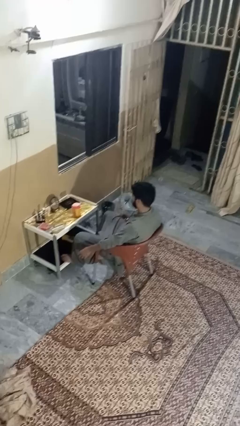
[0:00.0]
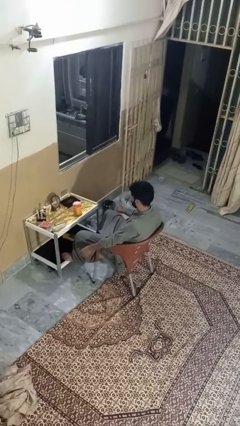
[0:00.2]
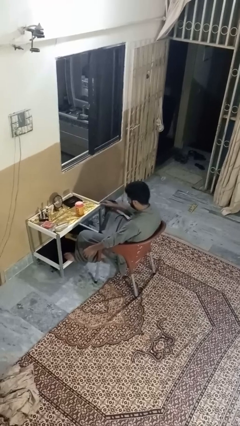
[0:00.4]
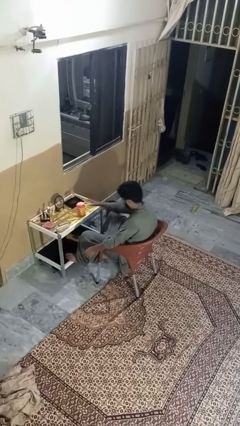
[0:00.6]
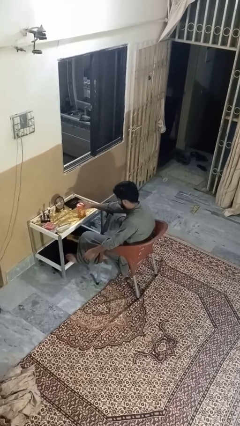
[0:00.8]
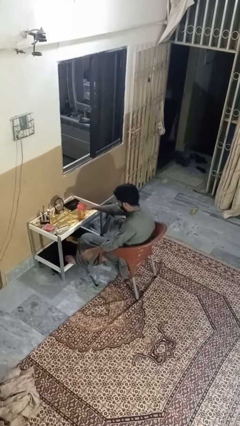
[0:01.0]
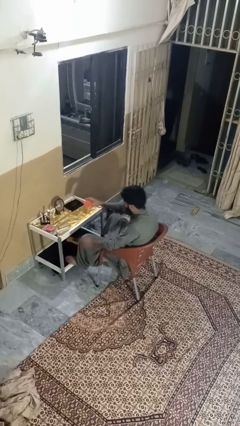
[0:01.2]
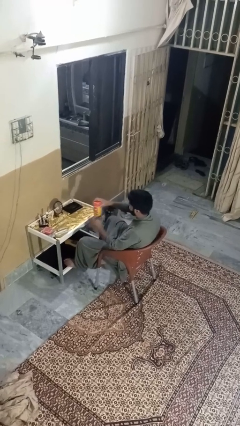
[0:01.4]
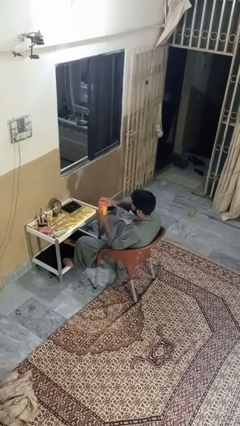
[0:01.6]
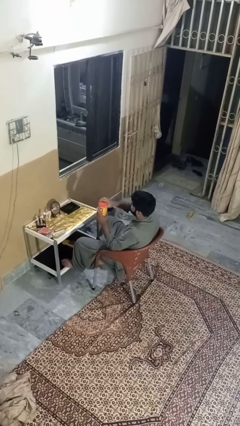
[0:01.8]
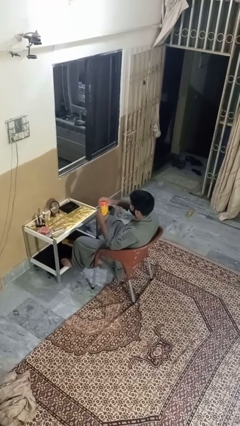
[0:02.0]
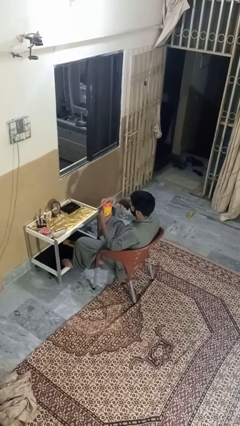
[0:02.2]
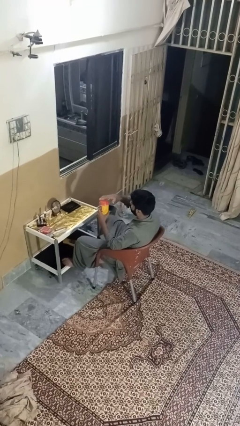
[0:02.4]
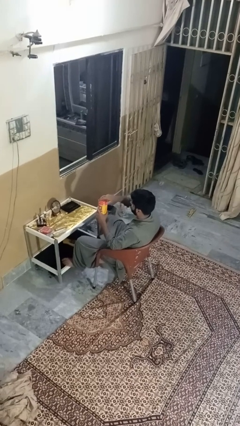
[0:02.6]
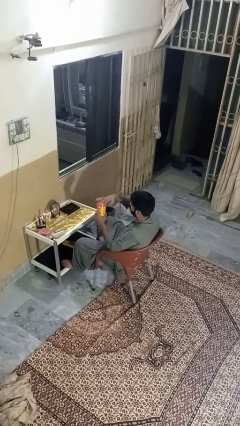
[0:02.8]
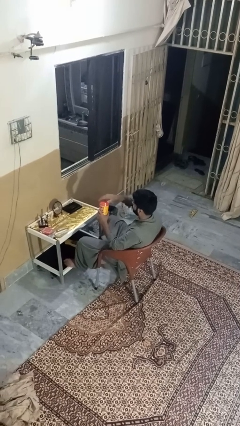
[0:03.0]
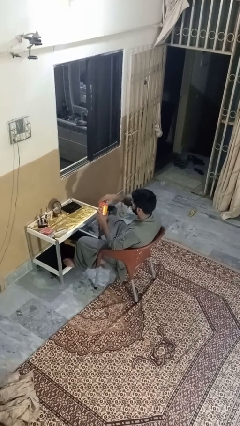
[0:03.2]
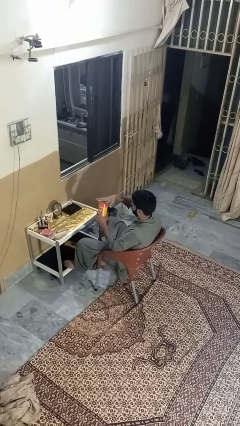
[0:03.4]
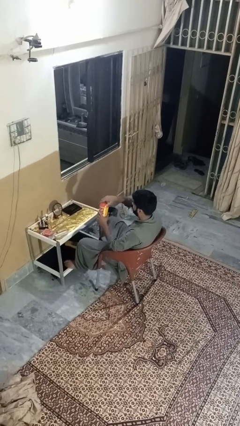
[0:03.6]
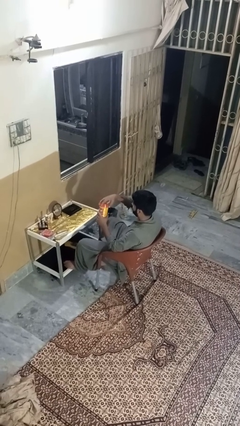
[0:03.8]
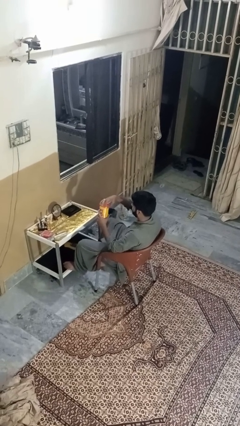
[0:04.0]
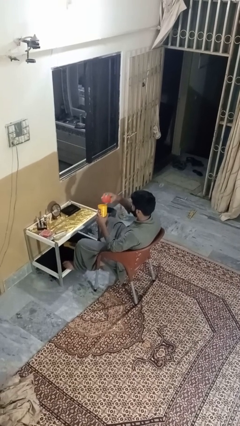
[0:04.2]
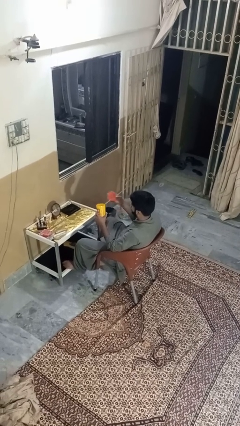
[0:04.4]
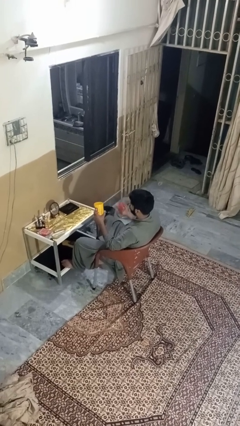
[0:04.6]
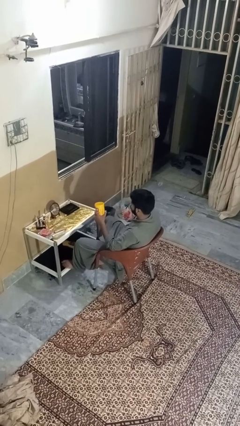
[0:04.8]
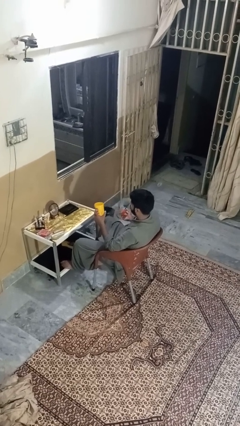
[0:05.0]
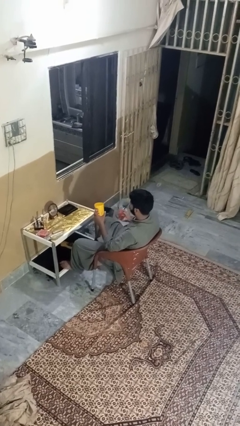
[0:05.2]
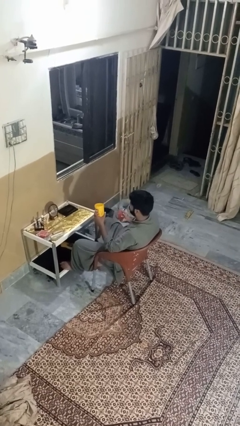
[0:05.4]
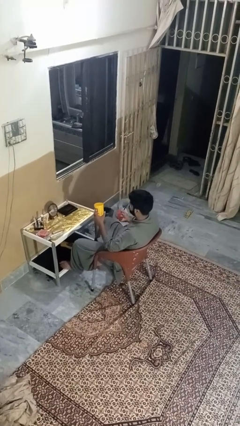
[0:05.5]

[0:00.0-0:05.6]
person opens jar

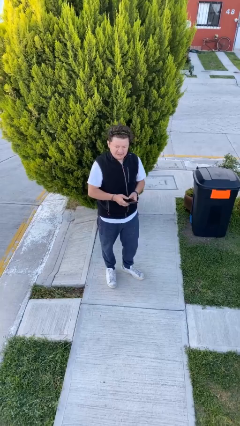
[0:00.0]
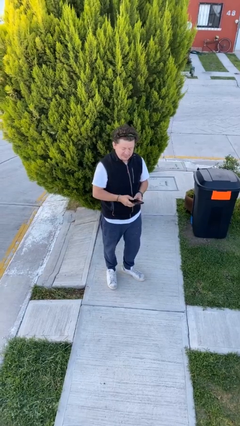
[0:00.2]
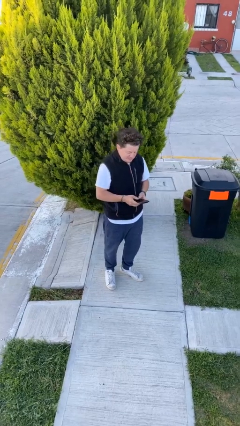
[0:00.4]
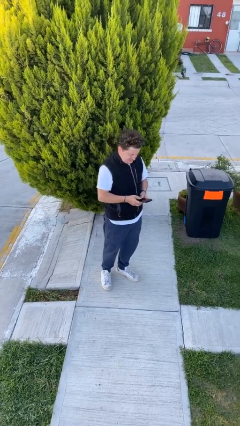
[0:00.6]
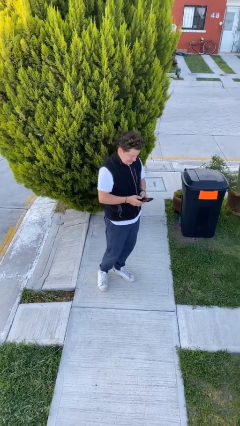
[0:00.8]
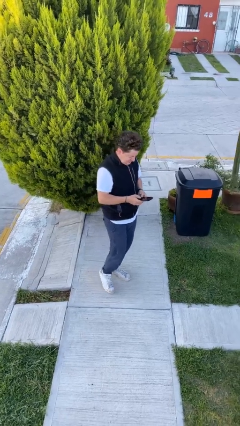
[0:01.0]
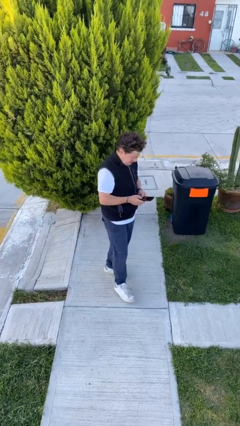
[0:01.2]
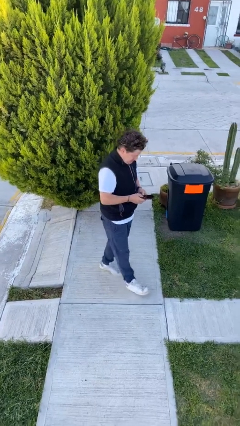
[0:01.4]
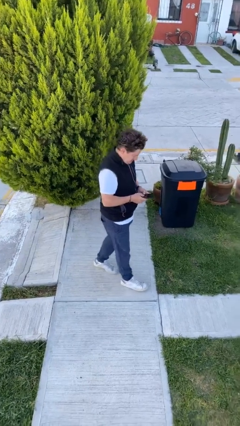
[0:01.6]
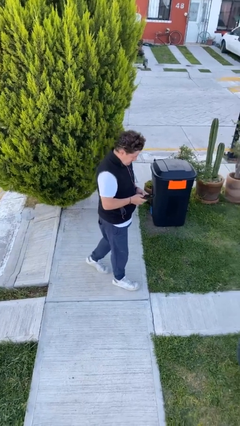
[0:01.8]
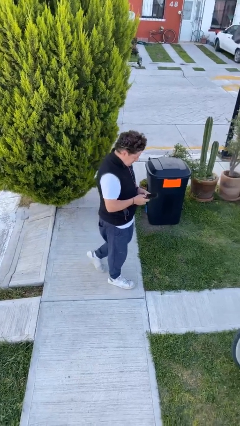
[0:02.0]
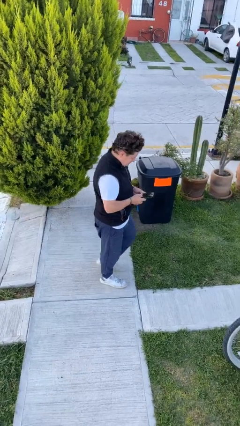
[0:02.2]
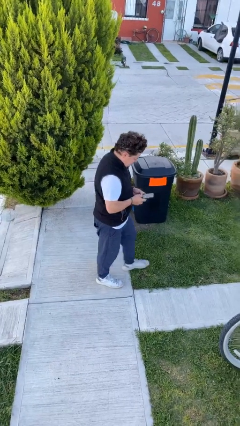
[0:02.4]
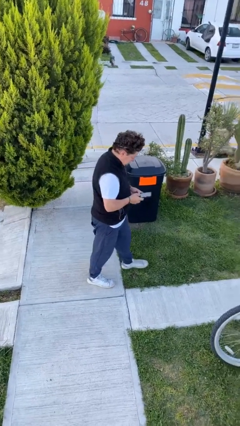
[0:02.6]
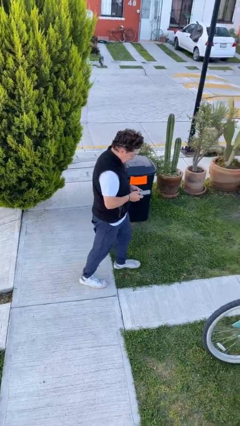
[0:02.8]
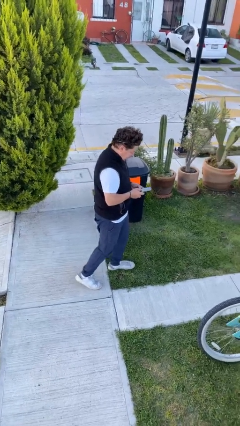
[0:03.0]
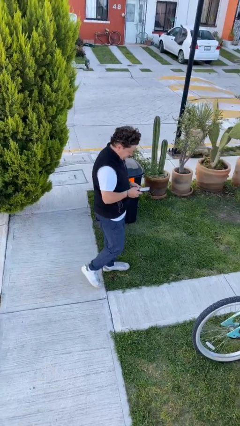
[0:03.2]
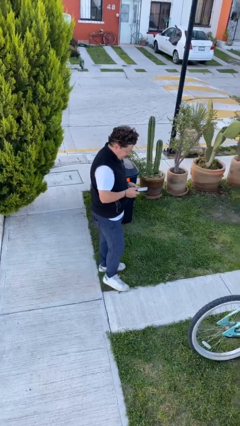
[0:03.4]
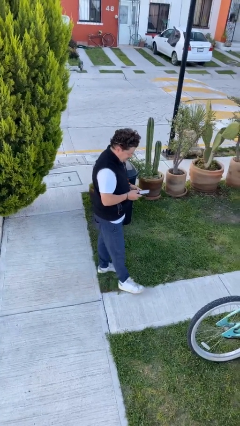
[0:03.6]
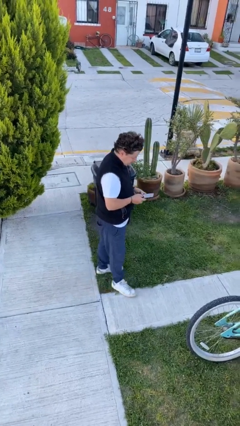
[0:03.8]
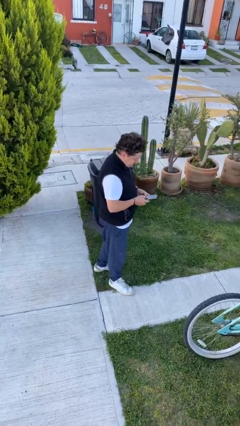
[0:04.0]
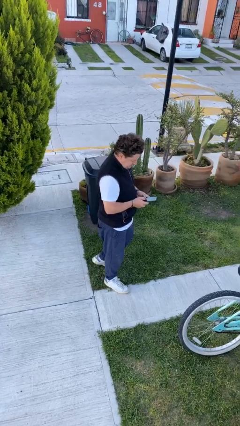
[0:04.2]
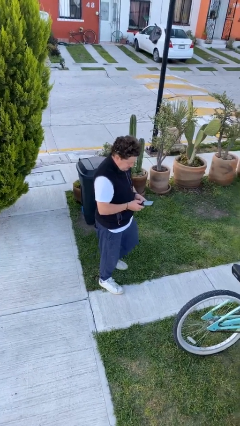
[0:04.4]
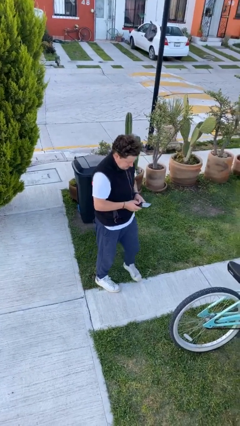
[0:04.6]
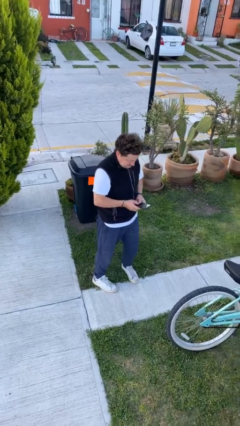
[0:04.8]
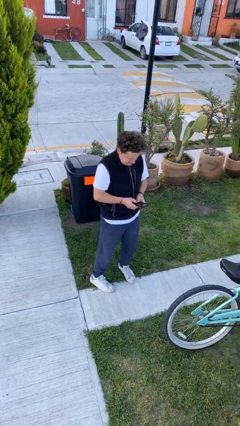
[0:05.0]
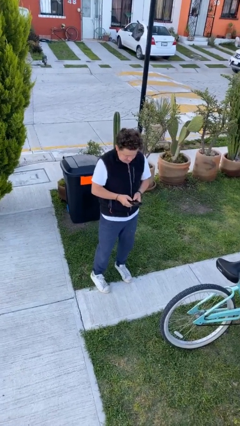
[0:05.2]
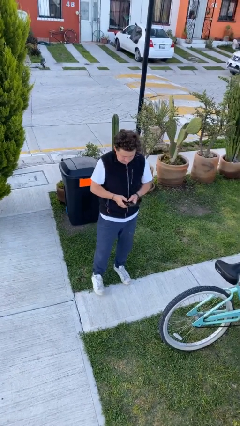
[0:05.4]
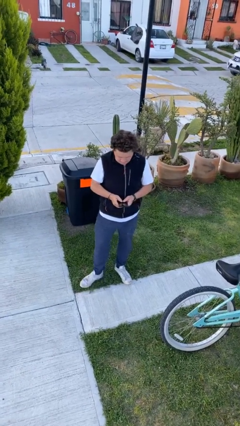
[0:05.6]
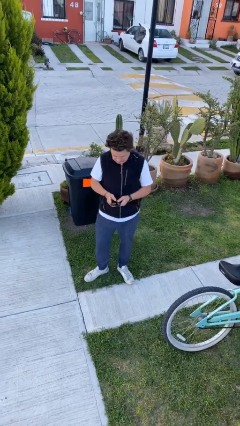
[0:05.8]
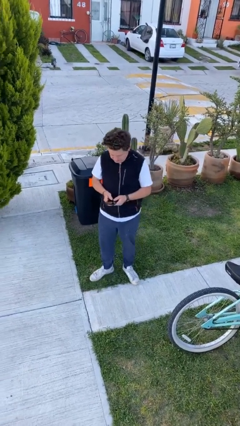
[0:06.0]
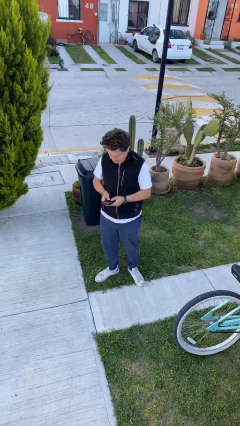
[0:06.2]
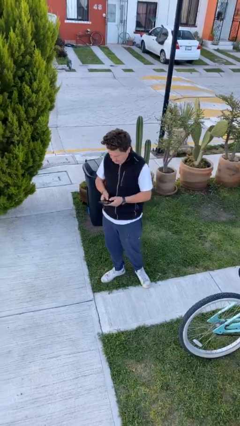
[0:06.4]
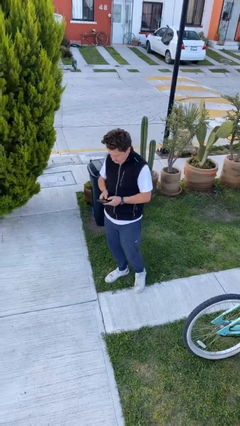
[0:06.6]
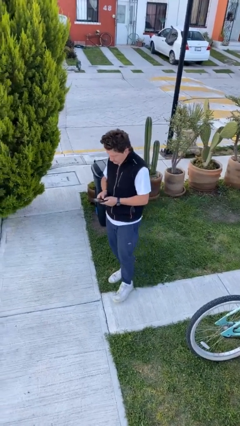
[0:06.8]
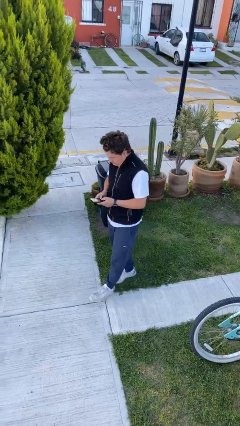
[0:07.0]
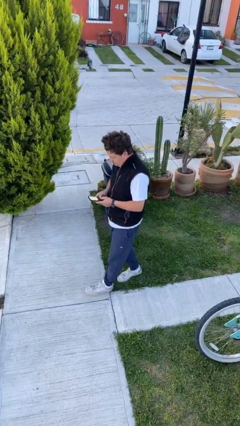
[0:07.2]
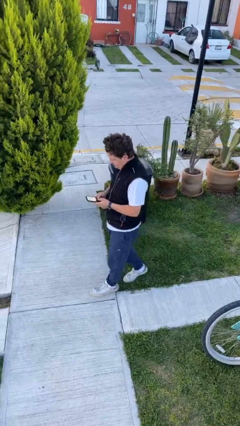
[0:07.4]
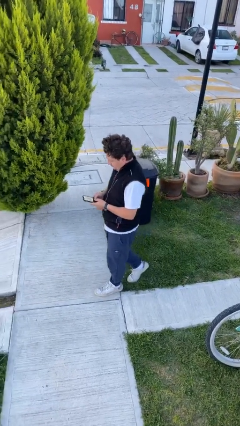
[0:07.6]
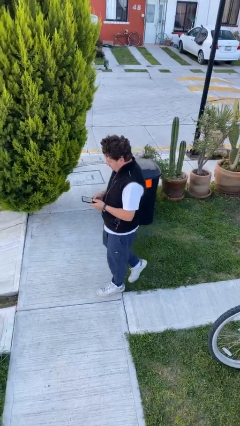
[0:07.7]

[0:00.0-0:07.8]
person texts on phone

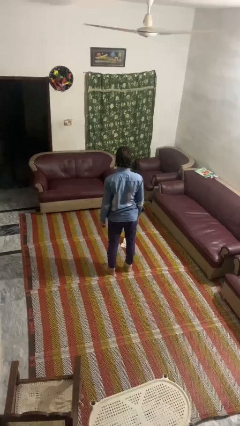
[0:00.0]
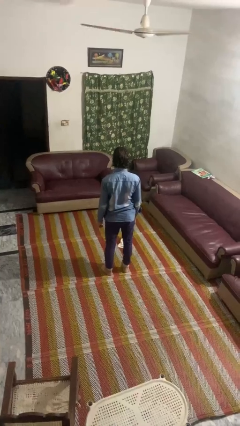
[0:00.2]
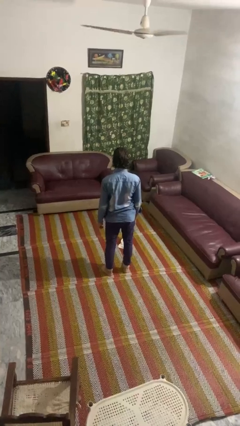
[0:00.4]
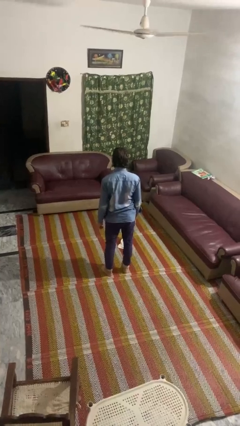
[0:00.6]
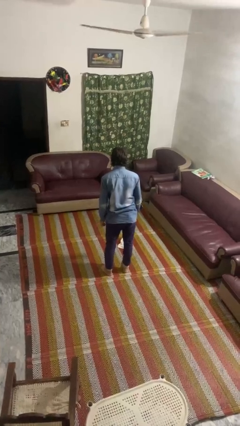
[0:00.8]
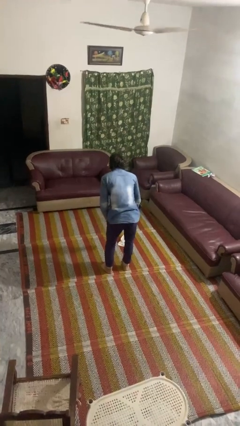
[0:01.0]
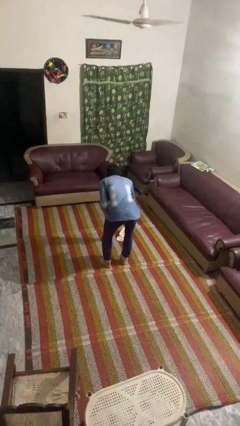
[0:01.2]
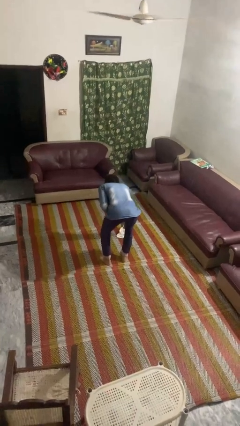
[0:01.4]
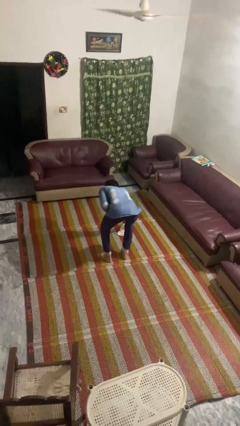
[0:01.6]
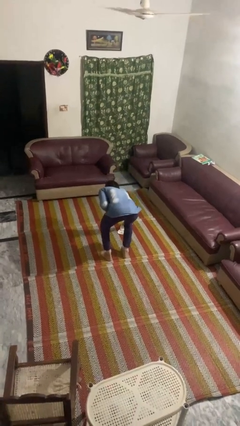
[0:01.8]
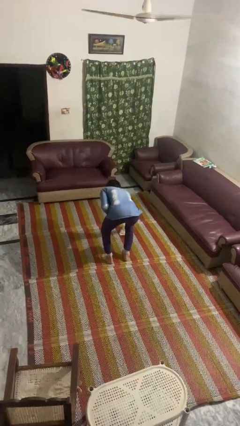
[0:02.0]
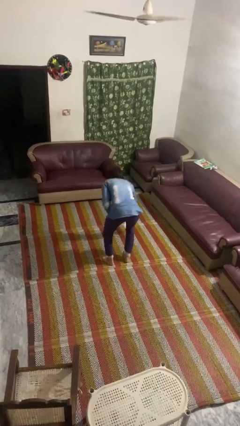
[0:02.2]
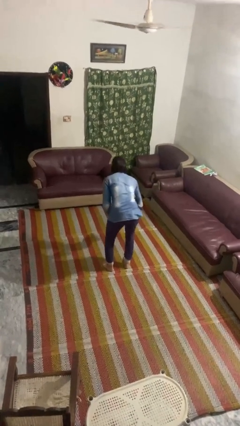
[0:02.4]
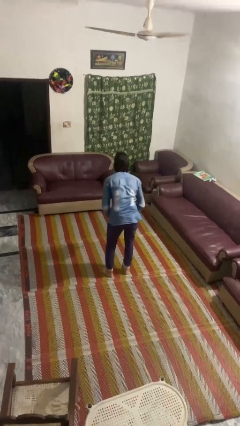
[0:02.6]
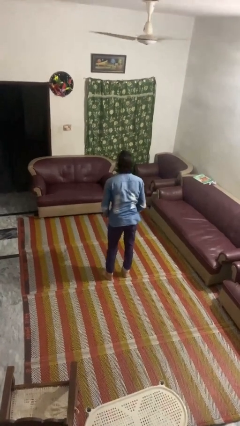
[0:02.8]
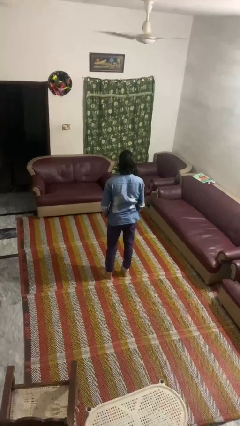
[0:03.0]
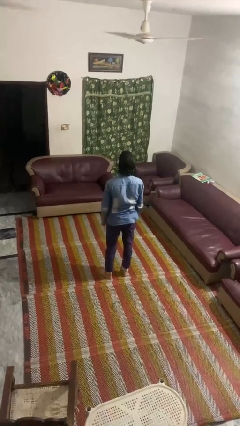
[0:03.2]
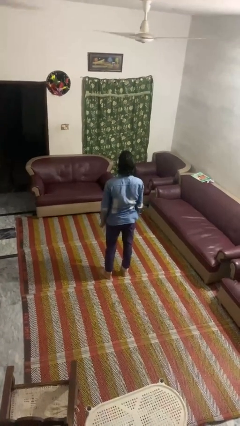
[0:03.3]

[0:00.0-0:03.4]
person picks up object from floor

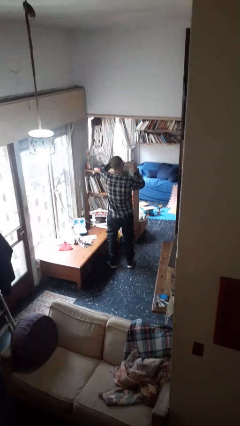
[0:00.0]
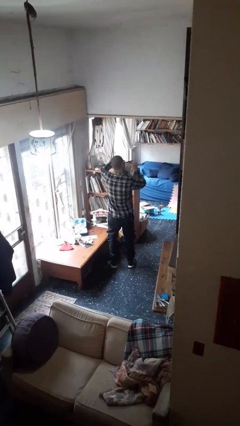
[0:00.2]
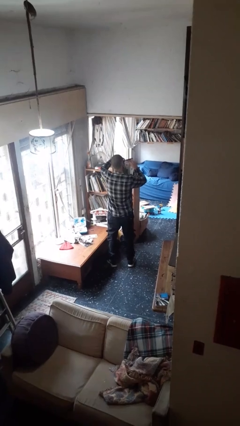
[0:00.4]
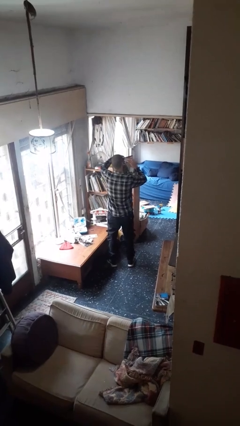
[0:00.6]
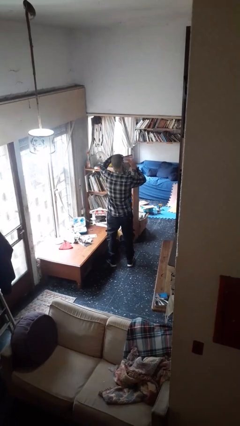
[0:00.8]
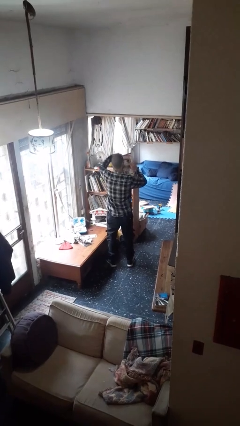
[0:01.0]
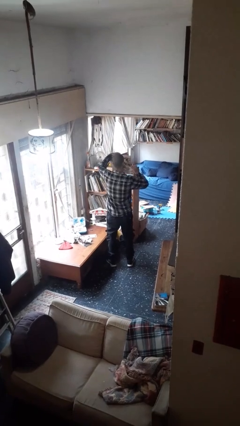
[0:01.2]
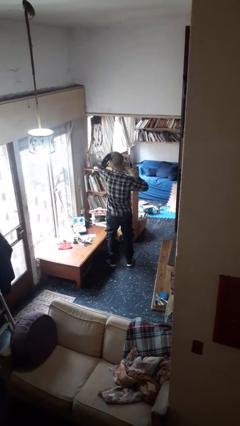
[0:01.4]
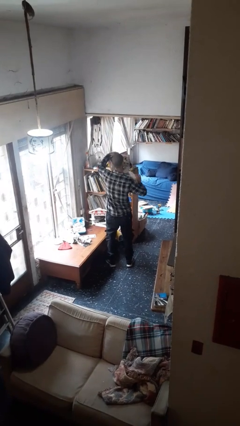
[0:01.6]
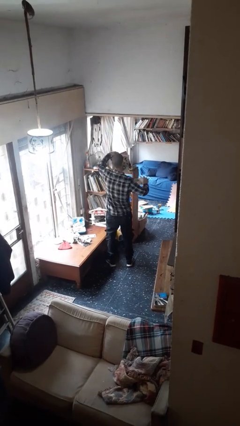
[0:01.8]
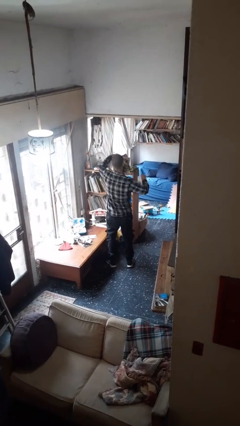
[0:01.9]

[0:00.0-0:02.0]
person tears paper
